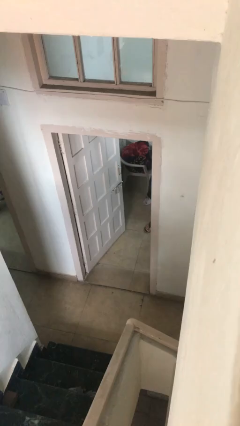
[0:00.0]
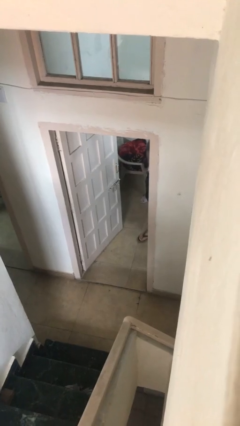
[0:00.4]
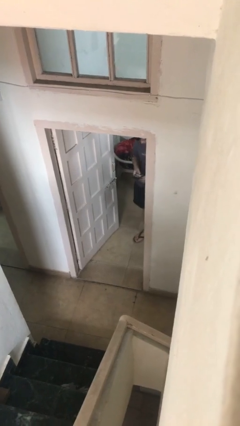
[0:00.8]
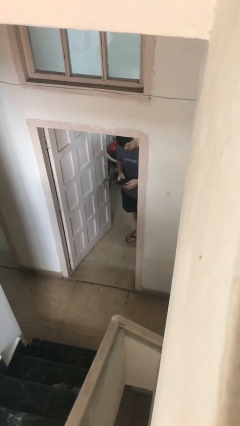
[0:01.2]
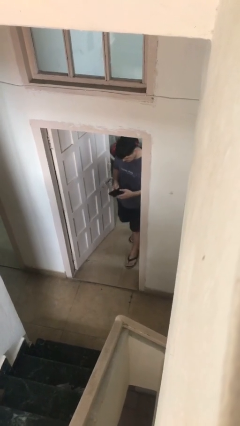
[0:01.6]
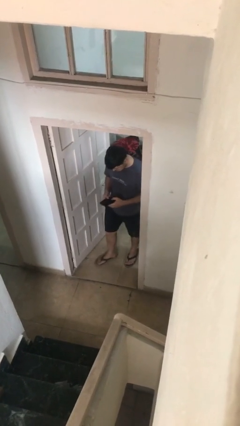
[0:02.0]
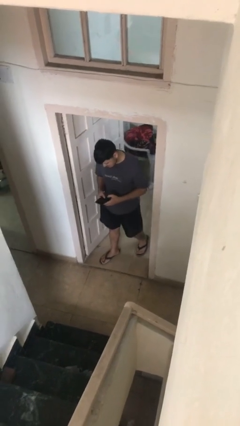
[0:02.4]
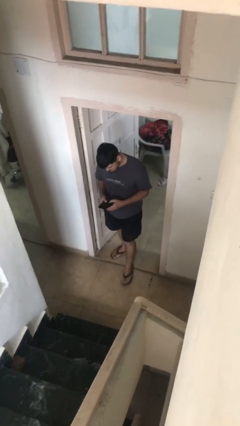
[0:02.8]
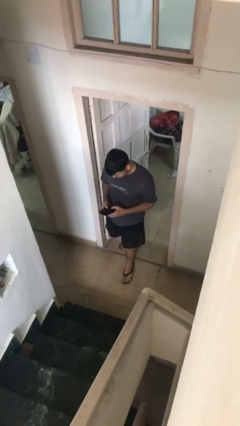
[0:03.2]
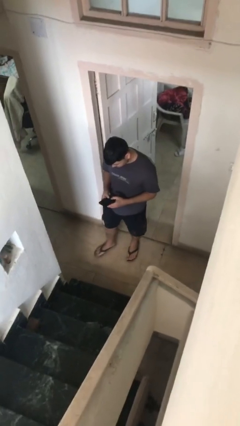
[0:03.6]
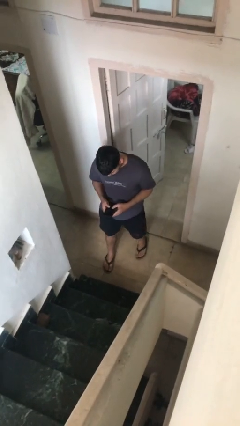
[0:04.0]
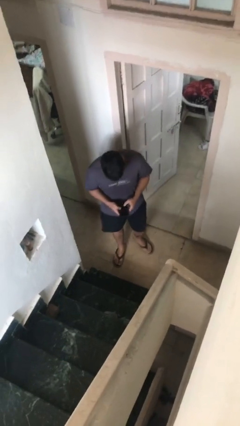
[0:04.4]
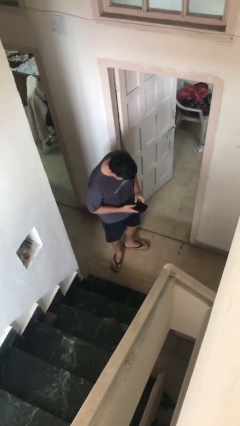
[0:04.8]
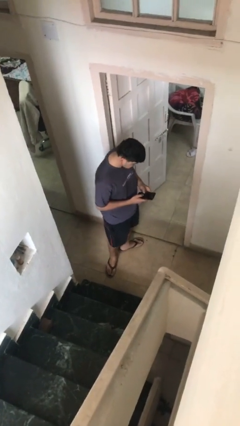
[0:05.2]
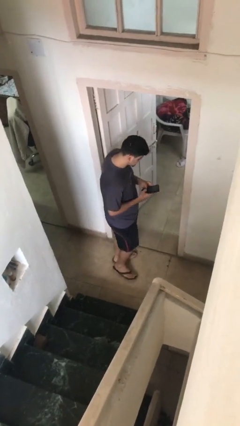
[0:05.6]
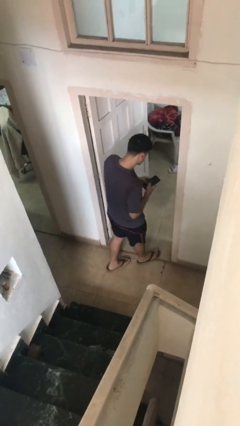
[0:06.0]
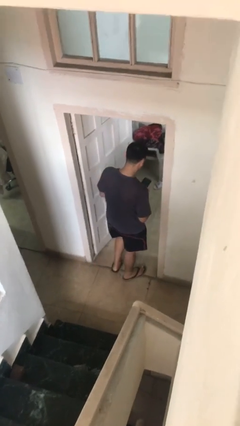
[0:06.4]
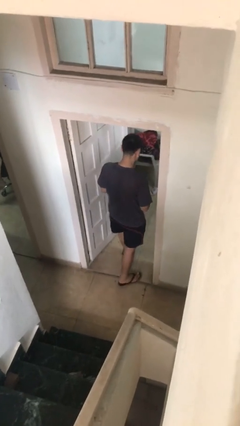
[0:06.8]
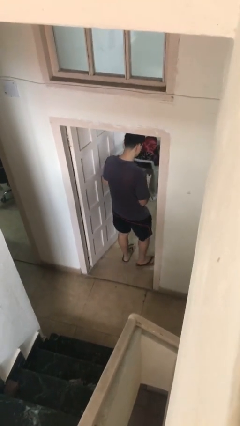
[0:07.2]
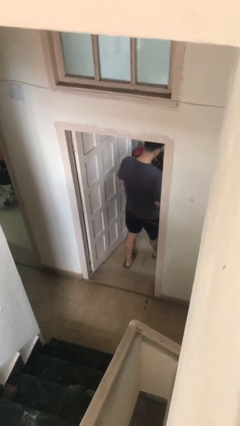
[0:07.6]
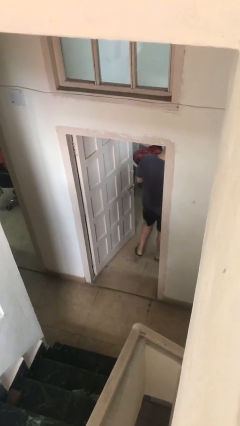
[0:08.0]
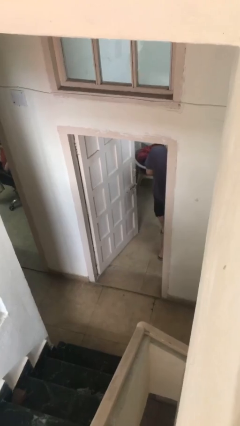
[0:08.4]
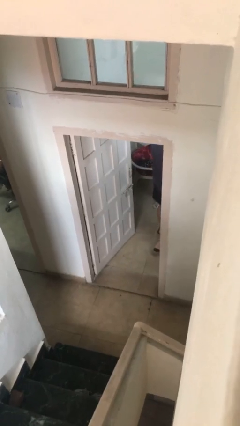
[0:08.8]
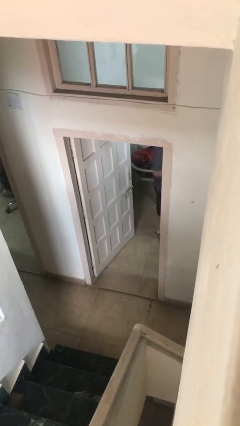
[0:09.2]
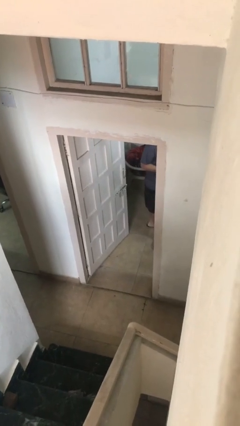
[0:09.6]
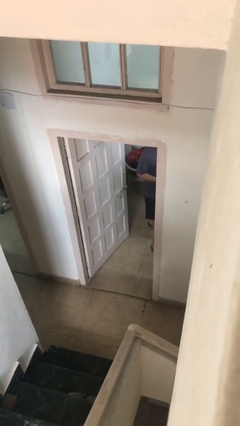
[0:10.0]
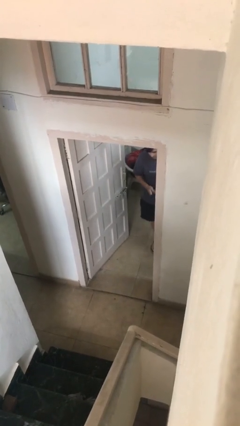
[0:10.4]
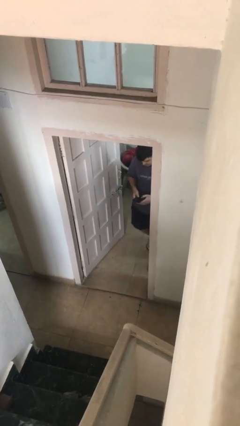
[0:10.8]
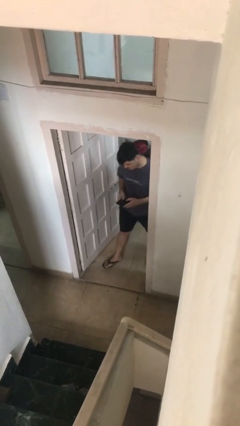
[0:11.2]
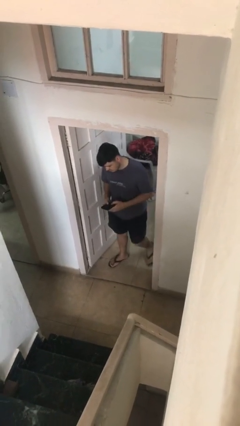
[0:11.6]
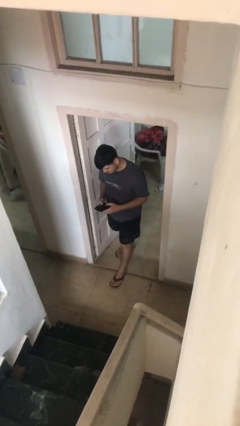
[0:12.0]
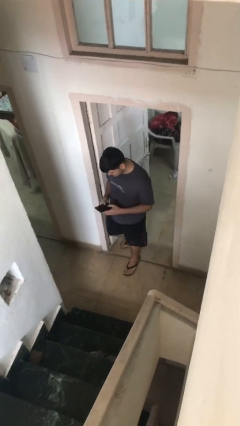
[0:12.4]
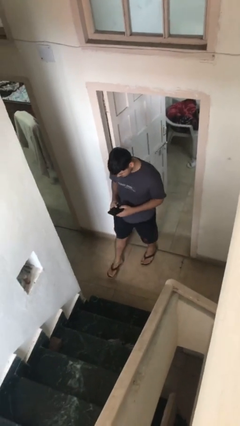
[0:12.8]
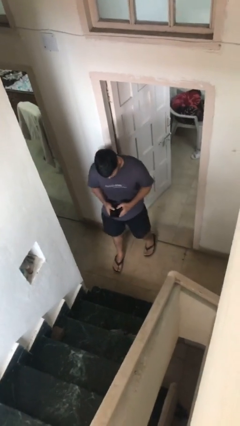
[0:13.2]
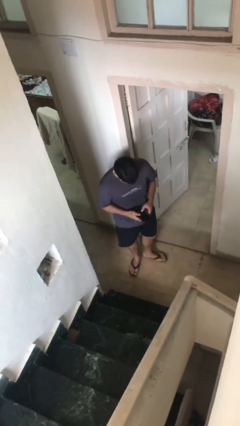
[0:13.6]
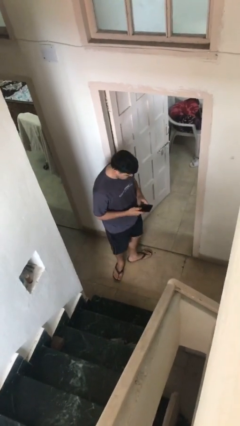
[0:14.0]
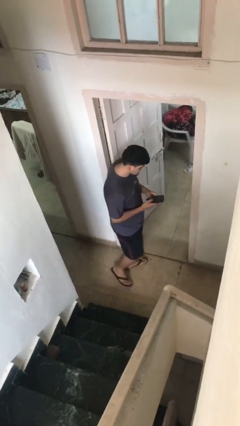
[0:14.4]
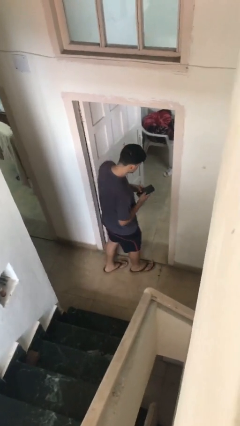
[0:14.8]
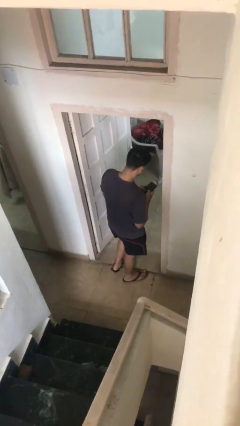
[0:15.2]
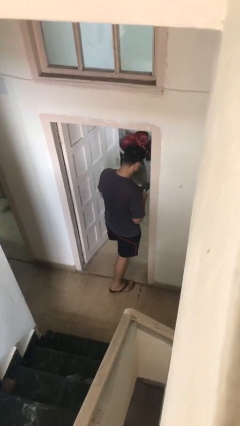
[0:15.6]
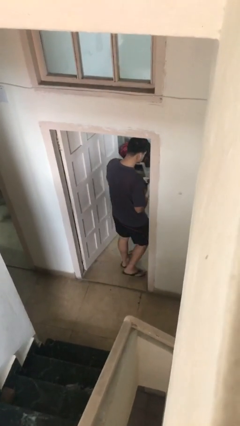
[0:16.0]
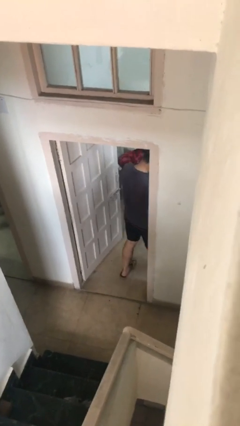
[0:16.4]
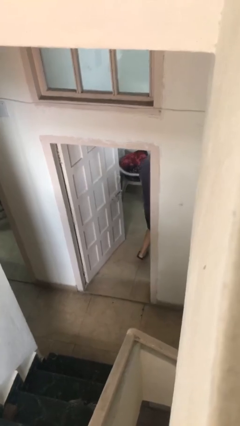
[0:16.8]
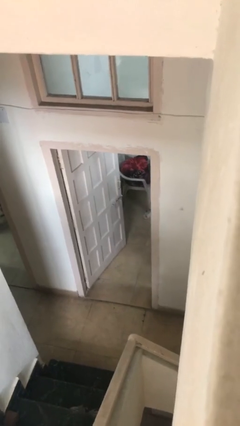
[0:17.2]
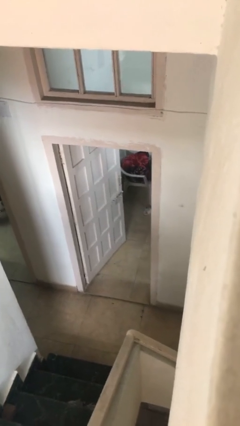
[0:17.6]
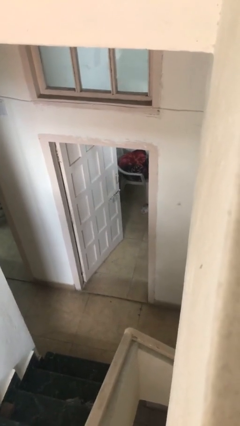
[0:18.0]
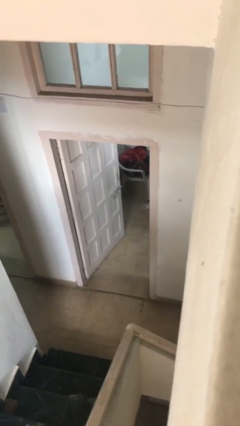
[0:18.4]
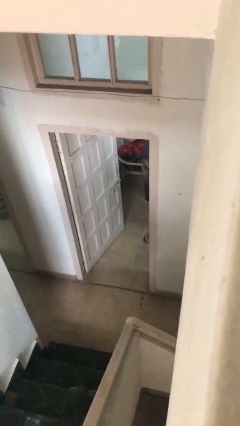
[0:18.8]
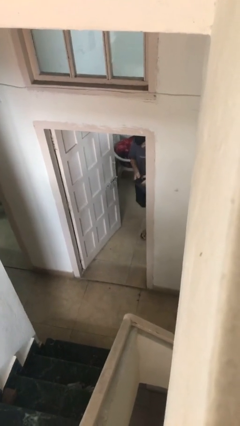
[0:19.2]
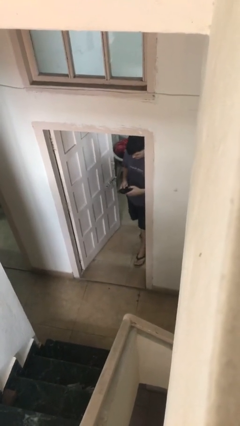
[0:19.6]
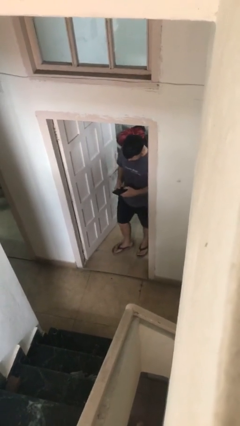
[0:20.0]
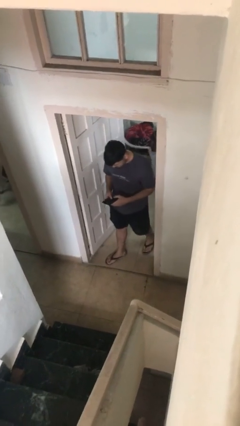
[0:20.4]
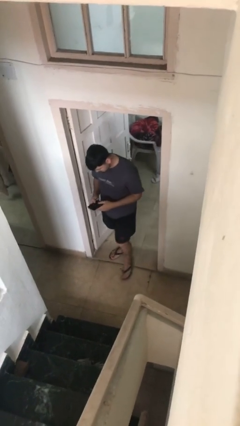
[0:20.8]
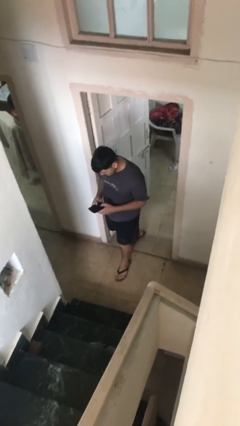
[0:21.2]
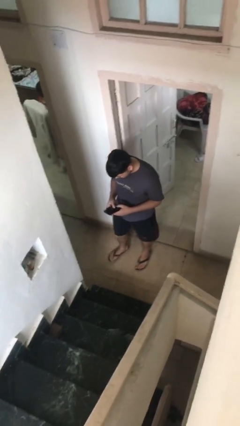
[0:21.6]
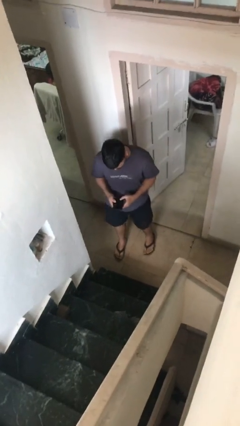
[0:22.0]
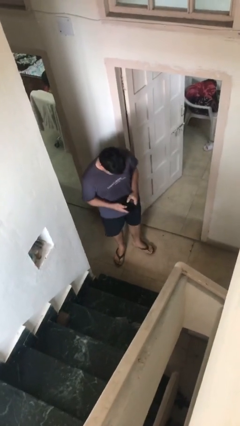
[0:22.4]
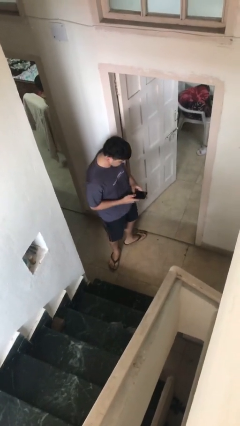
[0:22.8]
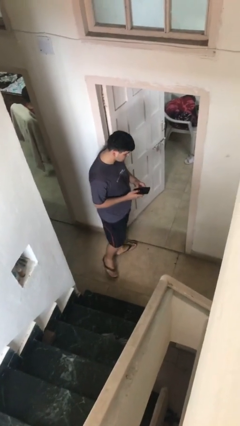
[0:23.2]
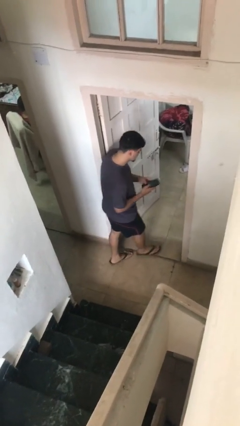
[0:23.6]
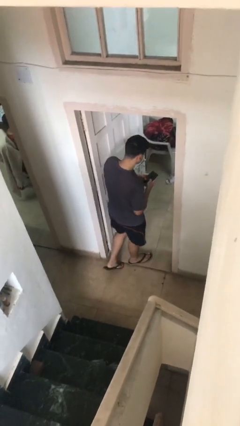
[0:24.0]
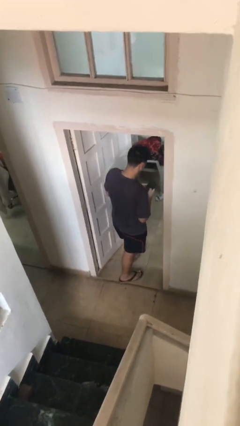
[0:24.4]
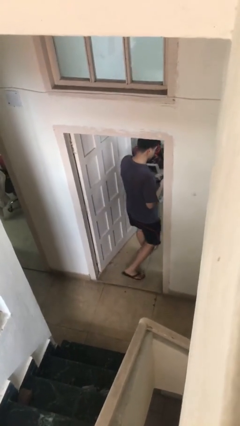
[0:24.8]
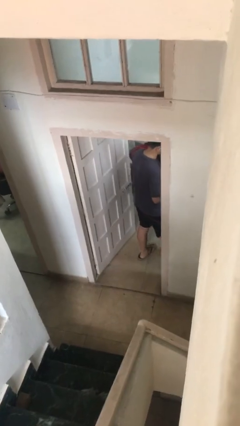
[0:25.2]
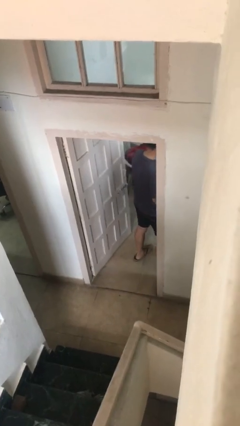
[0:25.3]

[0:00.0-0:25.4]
person texts on phone

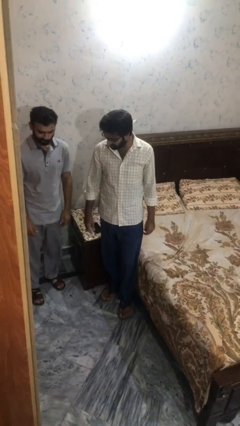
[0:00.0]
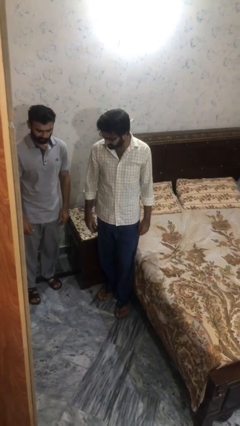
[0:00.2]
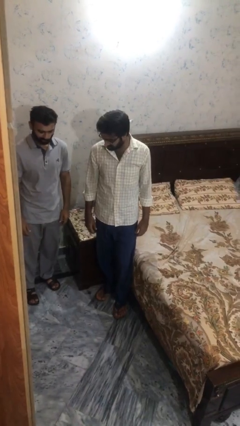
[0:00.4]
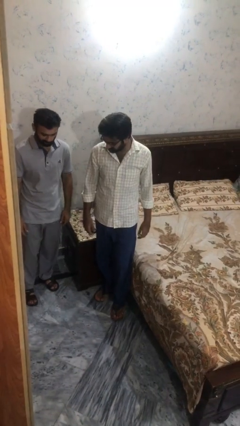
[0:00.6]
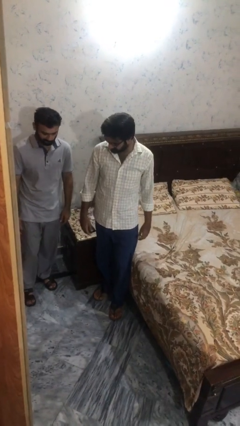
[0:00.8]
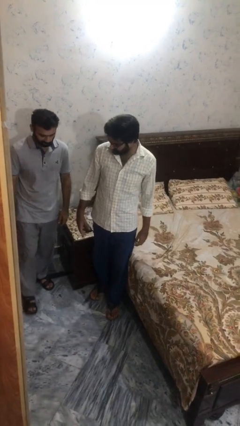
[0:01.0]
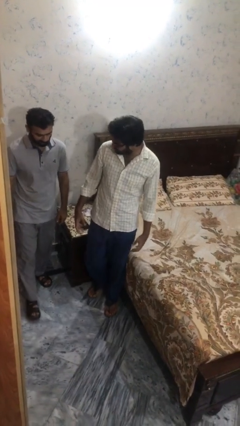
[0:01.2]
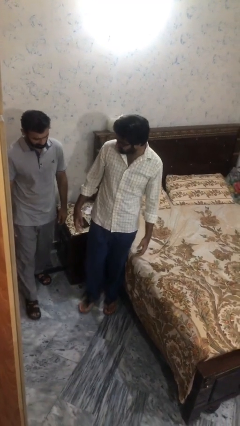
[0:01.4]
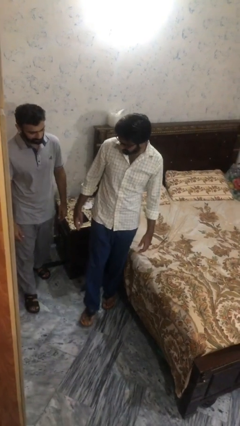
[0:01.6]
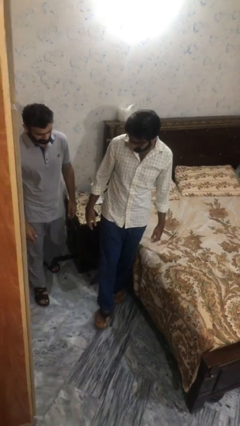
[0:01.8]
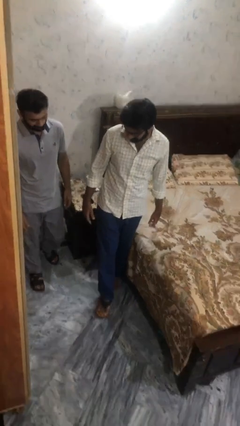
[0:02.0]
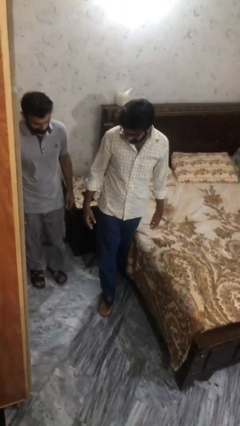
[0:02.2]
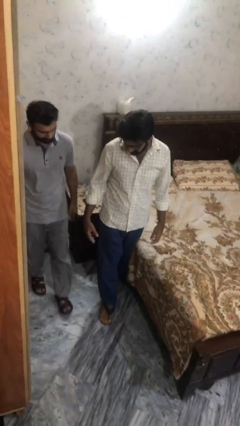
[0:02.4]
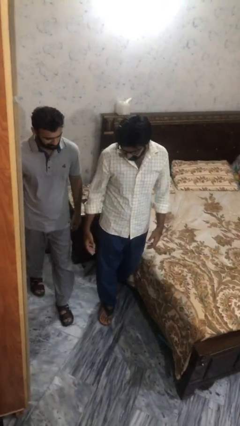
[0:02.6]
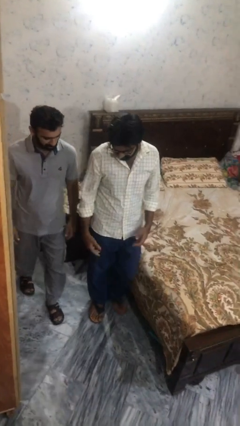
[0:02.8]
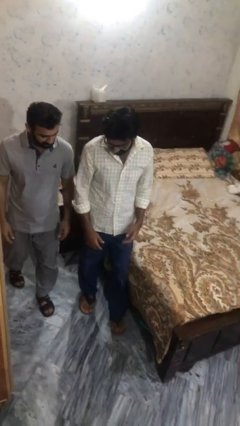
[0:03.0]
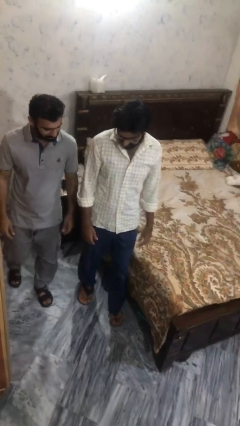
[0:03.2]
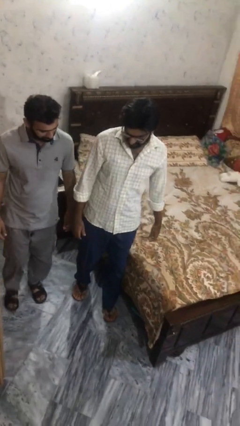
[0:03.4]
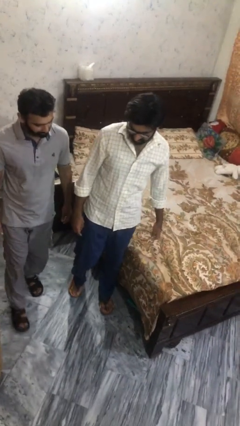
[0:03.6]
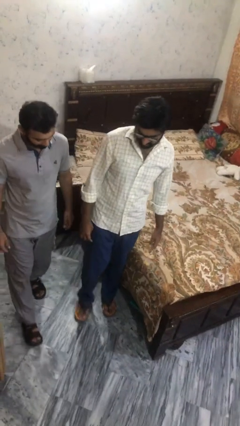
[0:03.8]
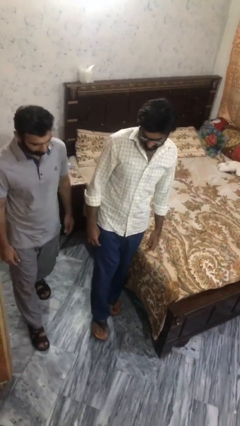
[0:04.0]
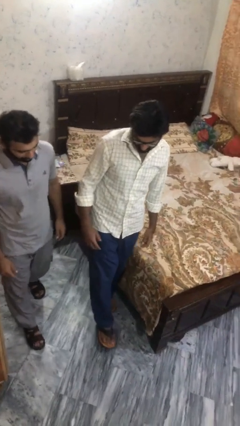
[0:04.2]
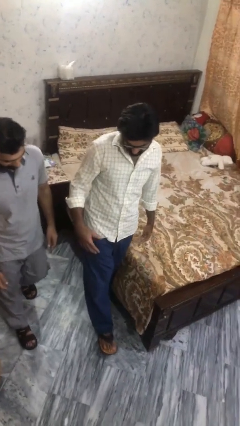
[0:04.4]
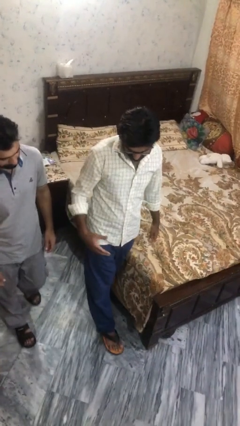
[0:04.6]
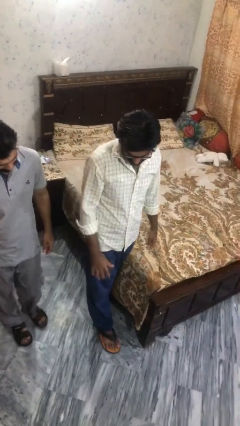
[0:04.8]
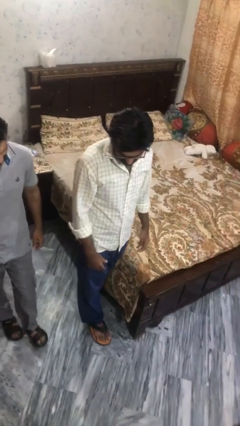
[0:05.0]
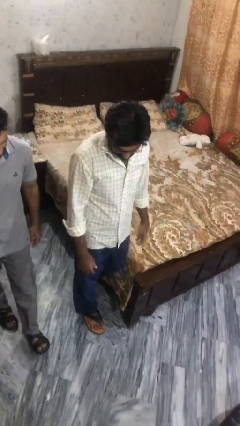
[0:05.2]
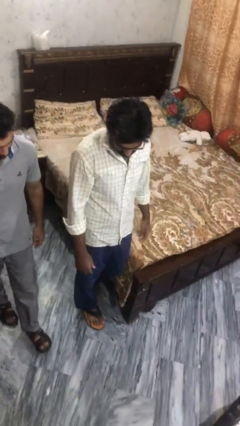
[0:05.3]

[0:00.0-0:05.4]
person talks to person

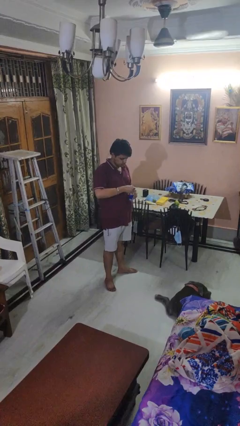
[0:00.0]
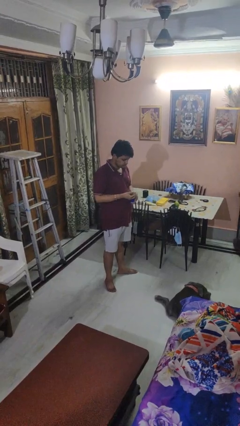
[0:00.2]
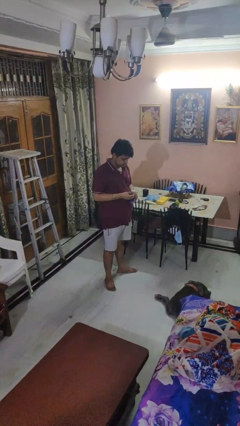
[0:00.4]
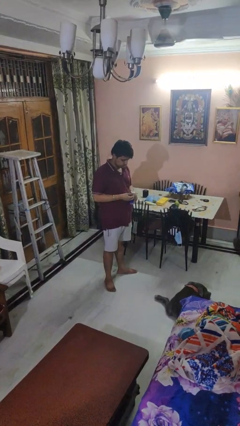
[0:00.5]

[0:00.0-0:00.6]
person opens beverage can
